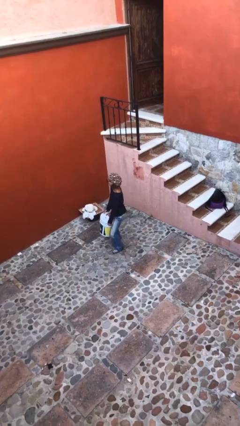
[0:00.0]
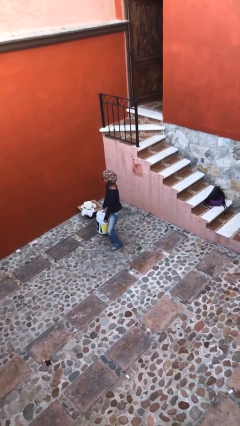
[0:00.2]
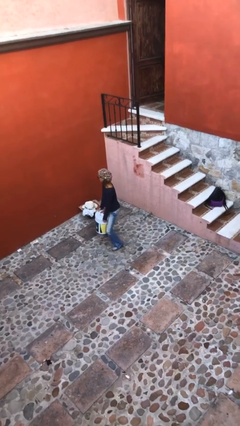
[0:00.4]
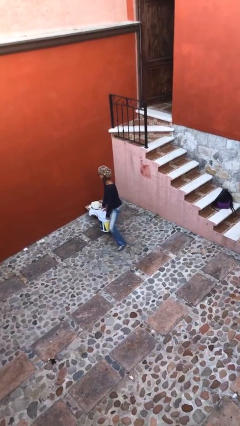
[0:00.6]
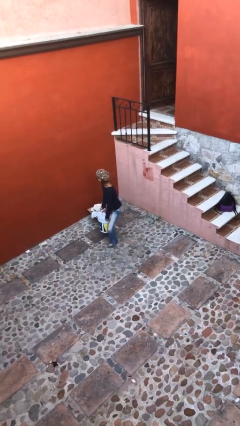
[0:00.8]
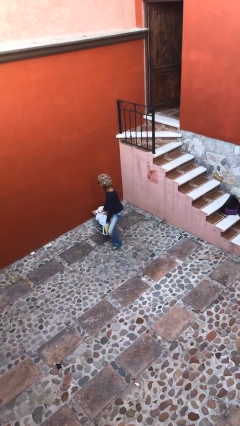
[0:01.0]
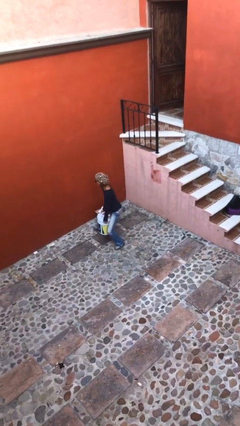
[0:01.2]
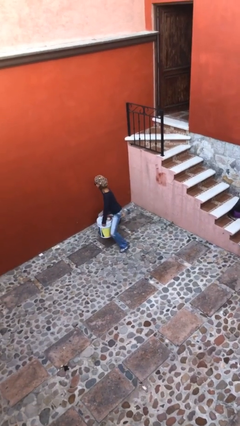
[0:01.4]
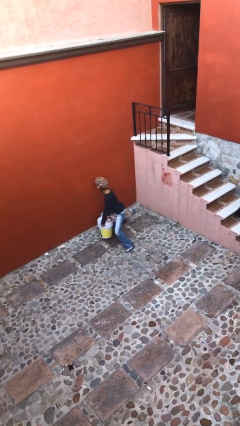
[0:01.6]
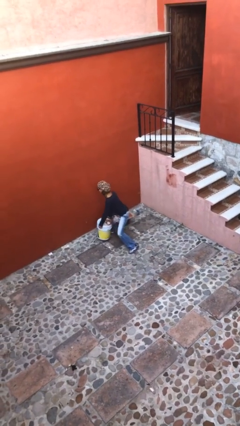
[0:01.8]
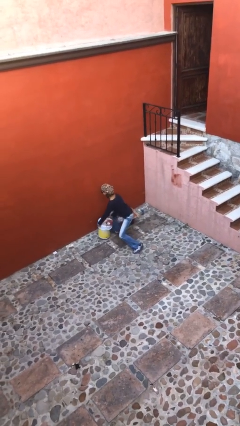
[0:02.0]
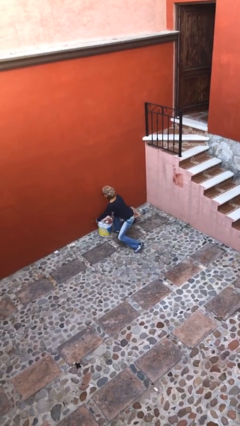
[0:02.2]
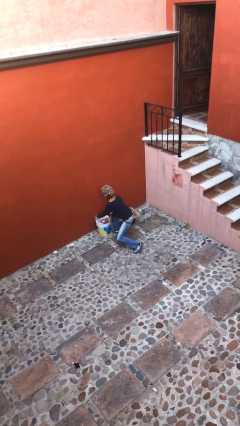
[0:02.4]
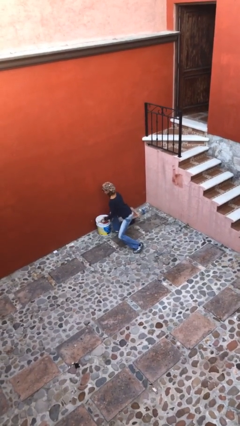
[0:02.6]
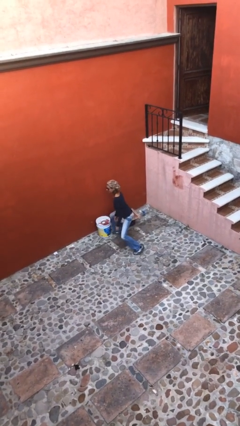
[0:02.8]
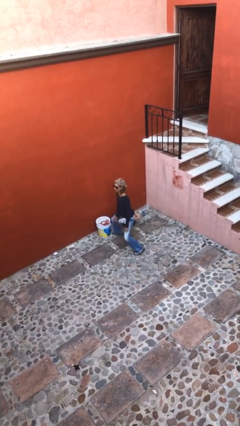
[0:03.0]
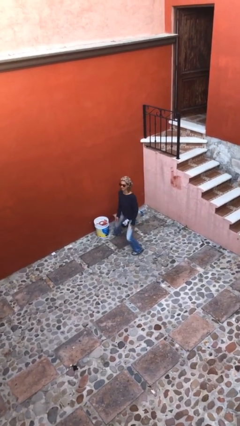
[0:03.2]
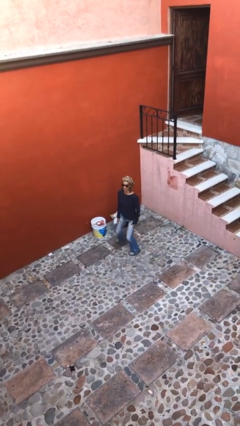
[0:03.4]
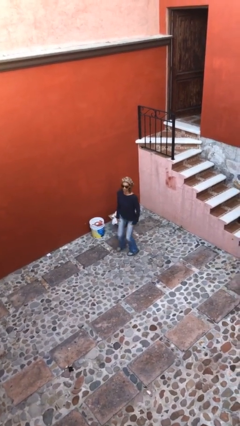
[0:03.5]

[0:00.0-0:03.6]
person puts down object on floor

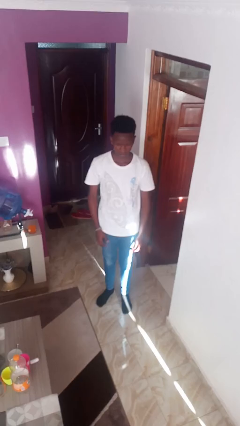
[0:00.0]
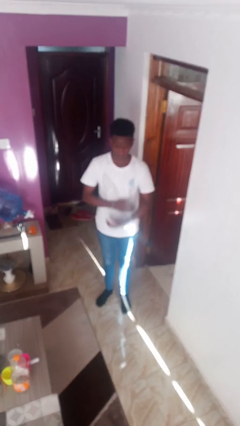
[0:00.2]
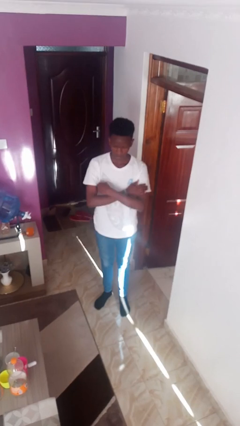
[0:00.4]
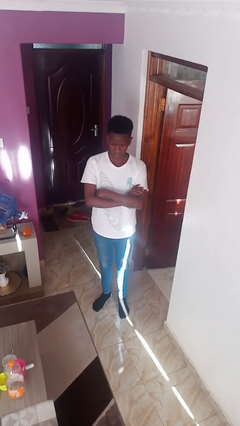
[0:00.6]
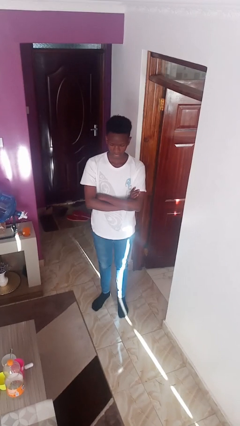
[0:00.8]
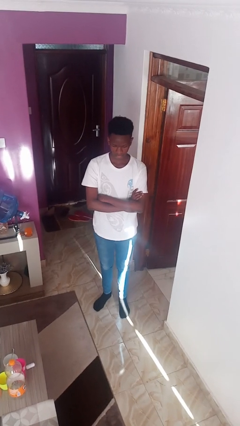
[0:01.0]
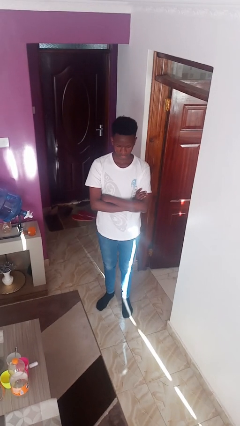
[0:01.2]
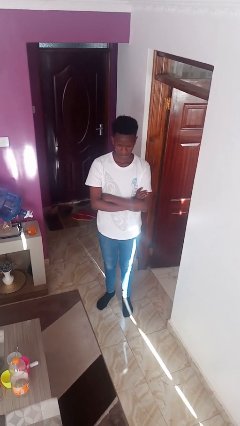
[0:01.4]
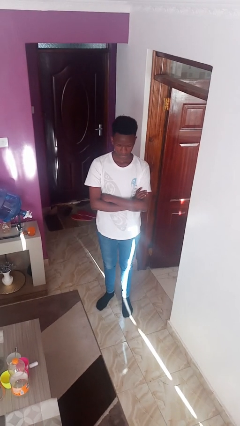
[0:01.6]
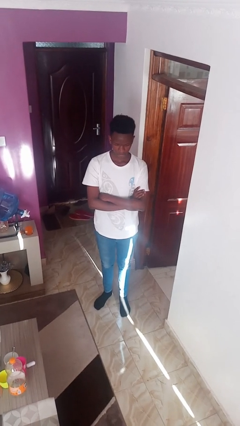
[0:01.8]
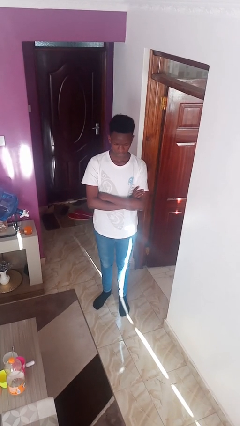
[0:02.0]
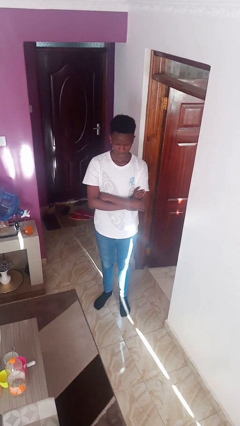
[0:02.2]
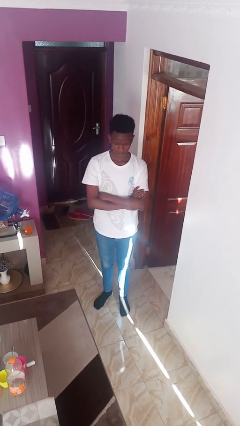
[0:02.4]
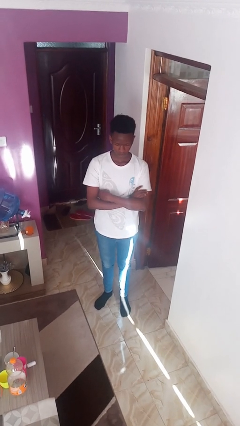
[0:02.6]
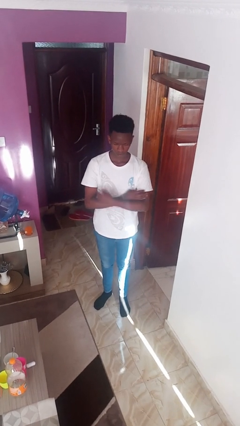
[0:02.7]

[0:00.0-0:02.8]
person crosses arms

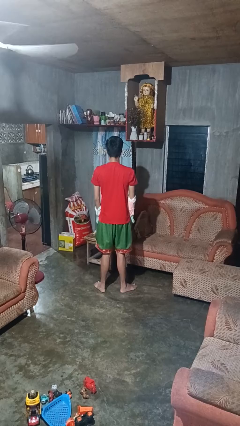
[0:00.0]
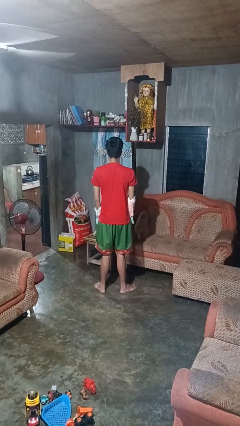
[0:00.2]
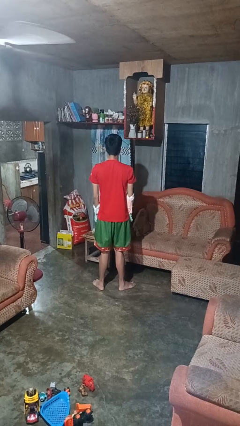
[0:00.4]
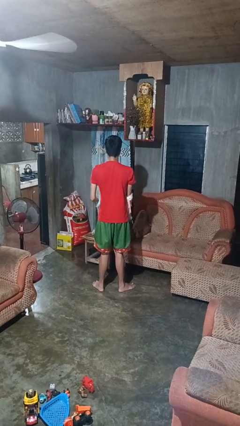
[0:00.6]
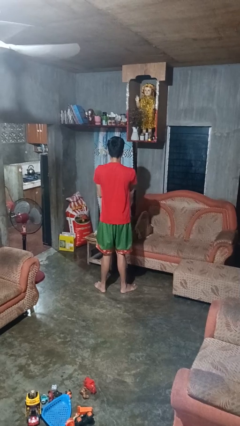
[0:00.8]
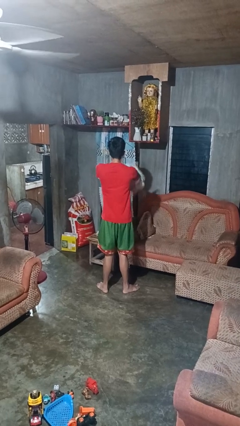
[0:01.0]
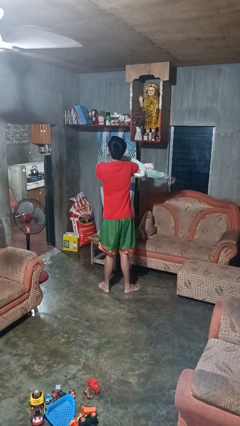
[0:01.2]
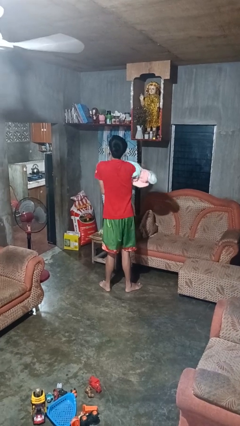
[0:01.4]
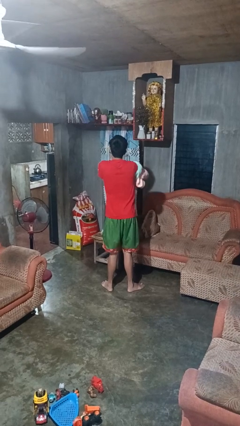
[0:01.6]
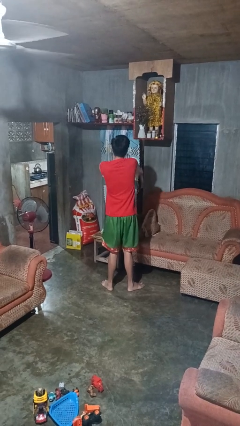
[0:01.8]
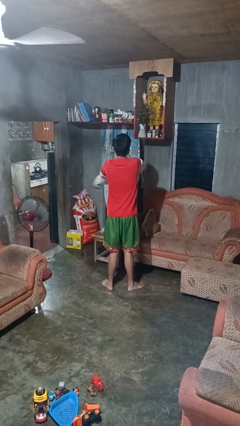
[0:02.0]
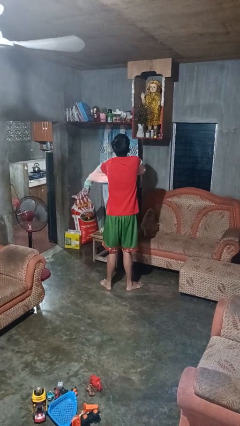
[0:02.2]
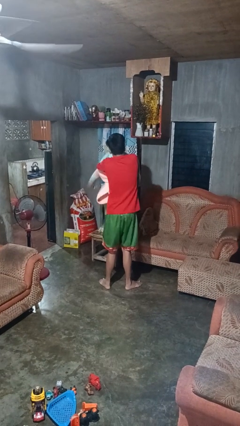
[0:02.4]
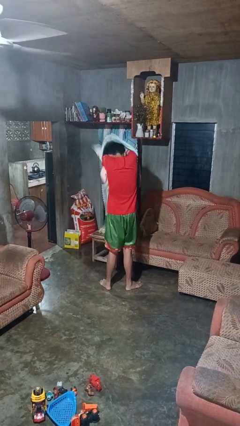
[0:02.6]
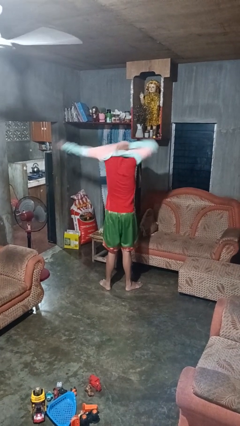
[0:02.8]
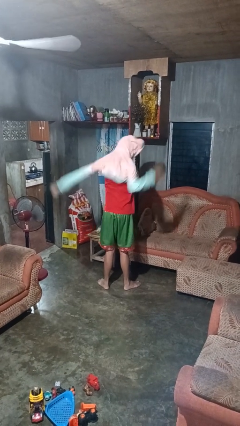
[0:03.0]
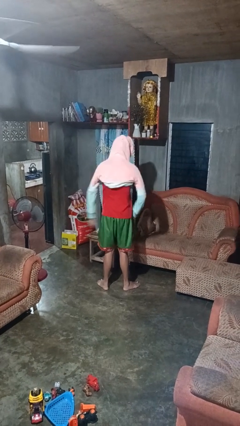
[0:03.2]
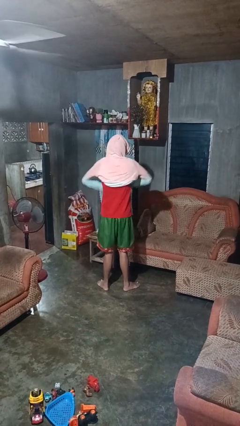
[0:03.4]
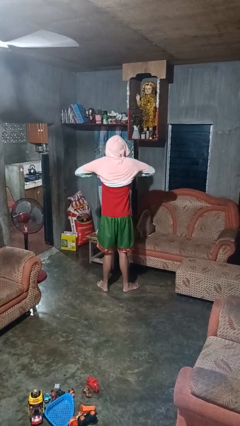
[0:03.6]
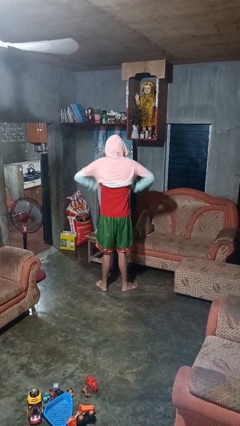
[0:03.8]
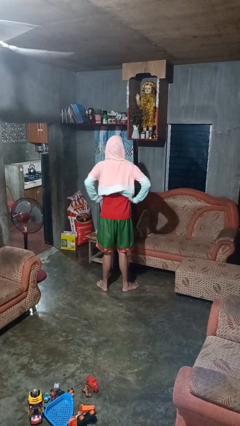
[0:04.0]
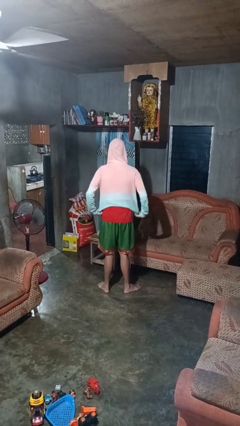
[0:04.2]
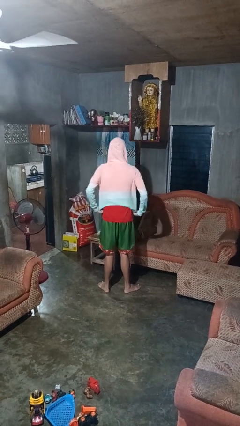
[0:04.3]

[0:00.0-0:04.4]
person puts on hoodie

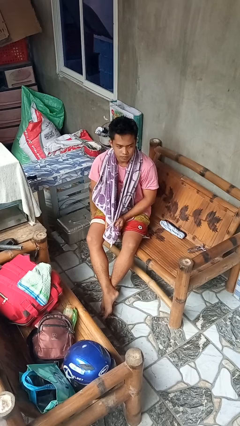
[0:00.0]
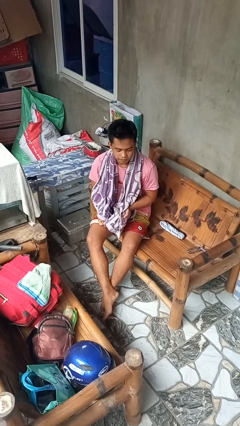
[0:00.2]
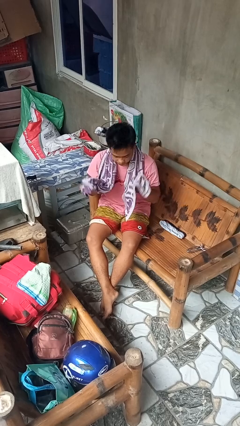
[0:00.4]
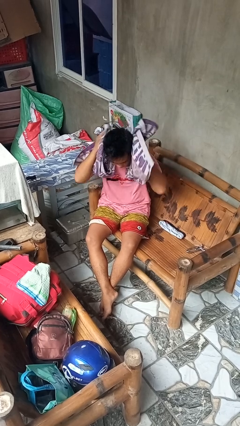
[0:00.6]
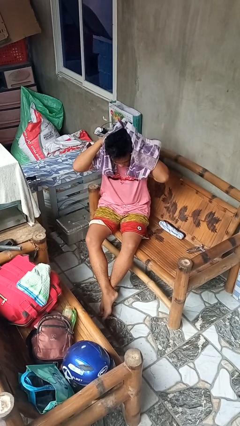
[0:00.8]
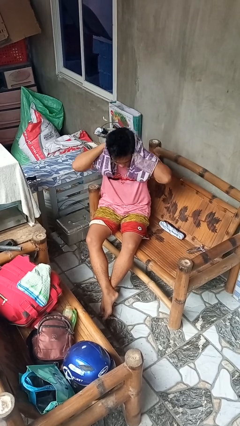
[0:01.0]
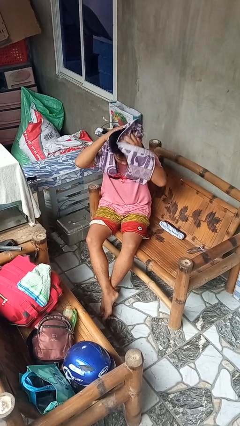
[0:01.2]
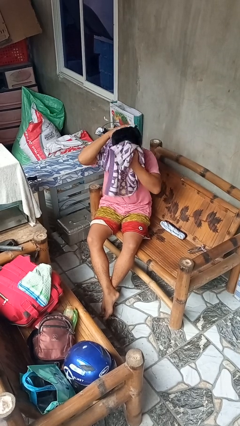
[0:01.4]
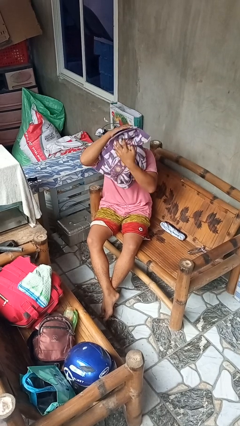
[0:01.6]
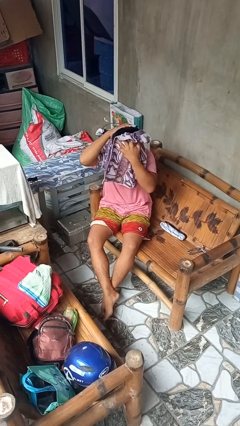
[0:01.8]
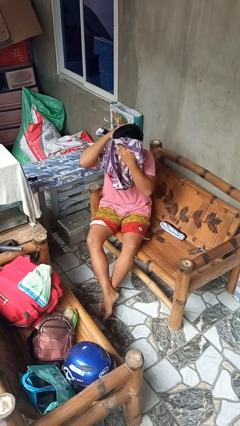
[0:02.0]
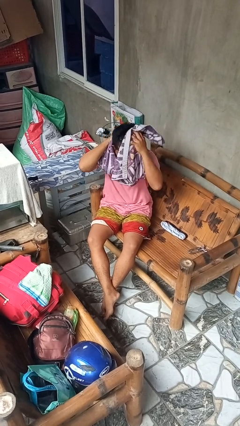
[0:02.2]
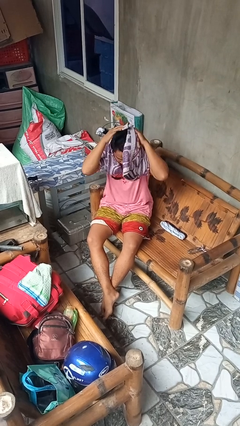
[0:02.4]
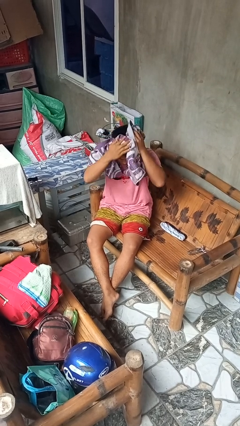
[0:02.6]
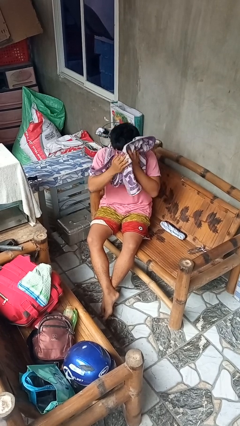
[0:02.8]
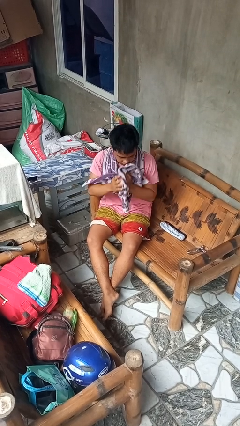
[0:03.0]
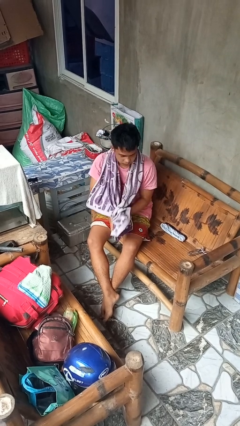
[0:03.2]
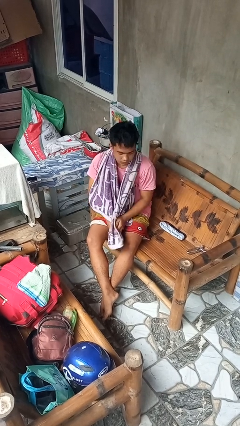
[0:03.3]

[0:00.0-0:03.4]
person dries hair with towel

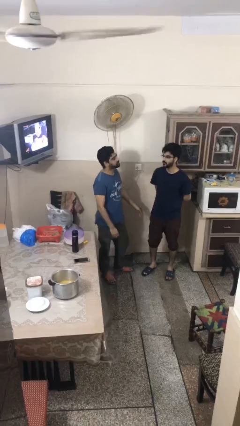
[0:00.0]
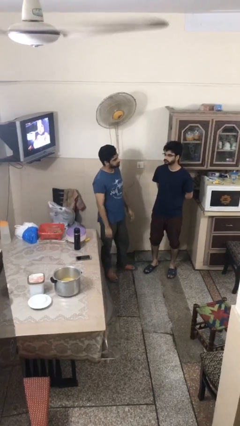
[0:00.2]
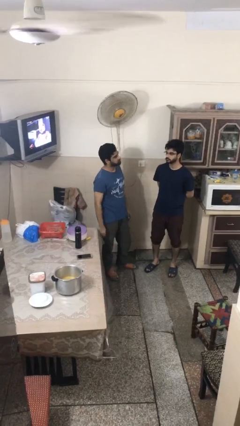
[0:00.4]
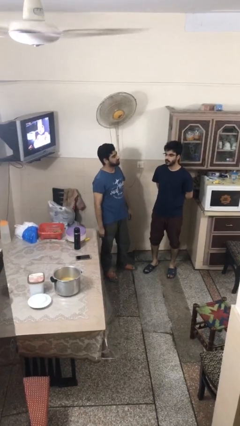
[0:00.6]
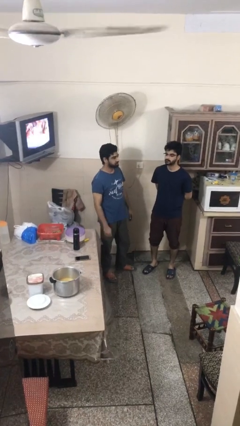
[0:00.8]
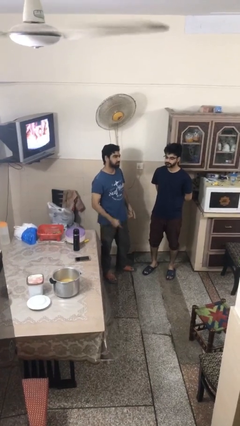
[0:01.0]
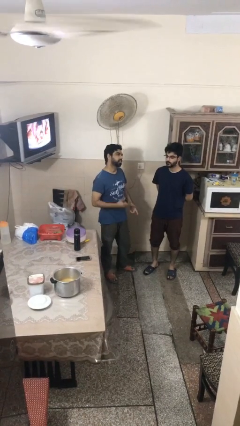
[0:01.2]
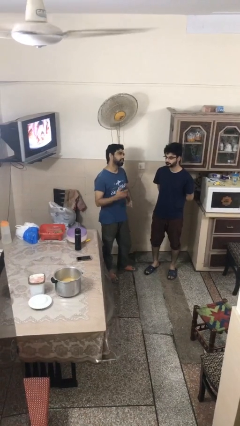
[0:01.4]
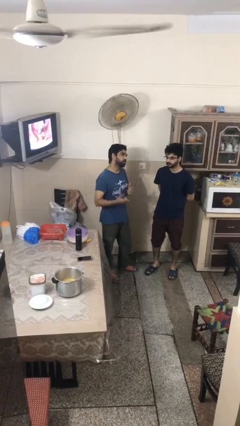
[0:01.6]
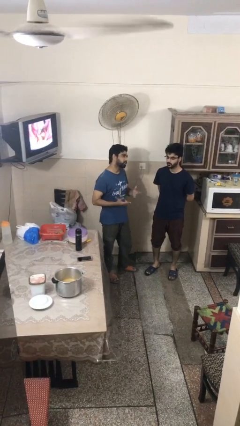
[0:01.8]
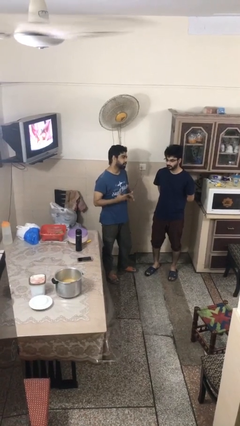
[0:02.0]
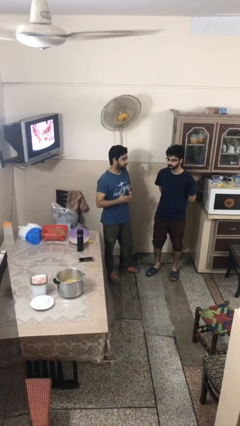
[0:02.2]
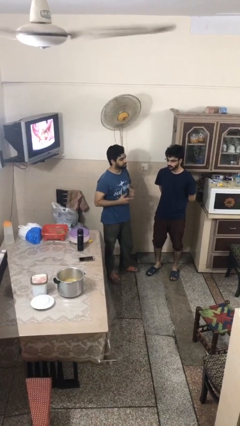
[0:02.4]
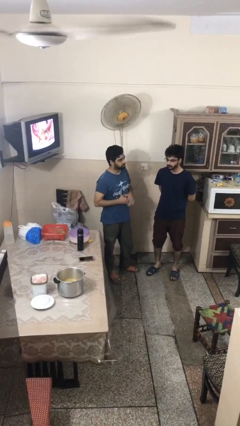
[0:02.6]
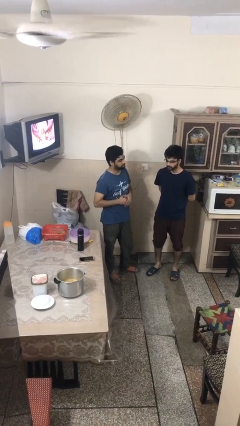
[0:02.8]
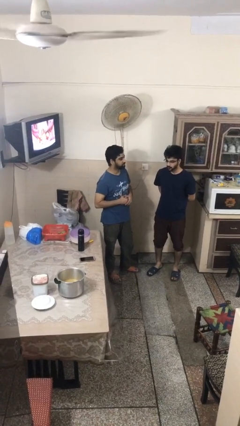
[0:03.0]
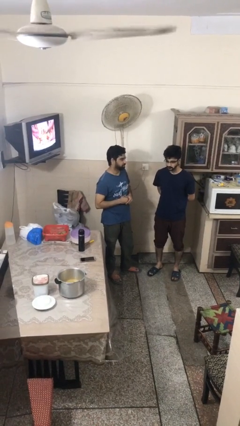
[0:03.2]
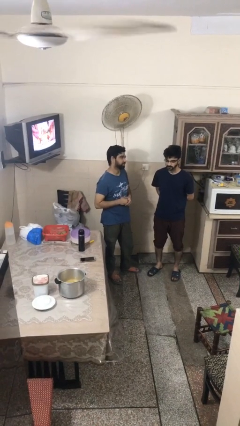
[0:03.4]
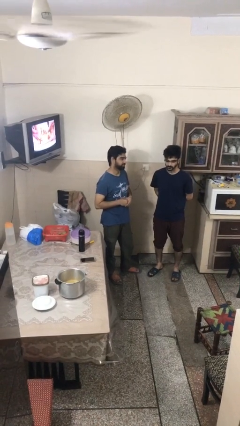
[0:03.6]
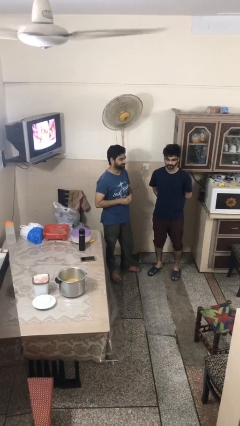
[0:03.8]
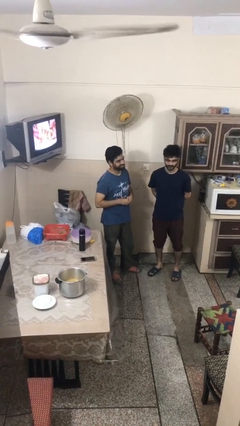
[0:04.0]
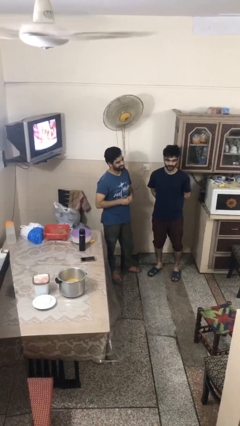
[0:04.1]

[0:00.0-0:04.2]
person talks to person
